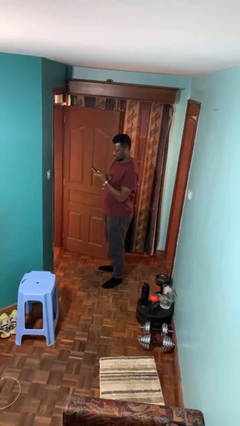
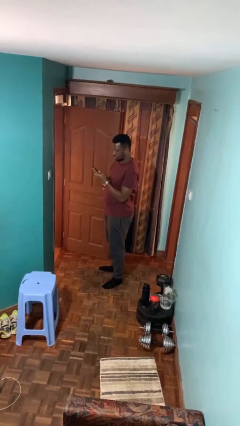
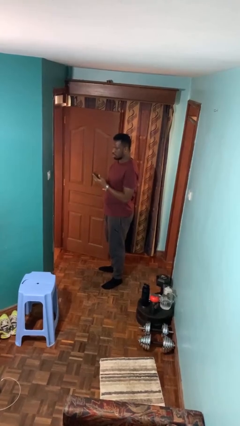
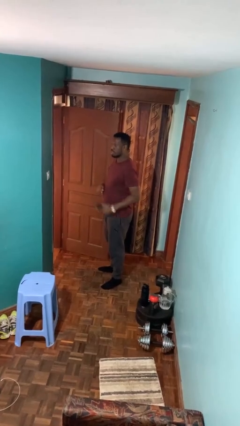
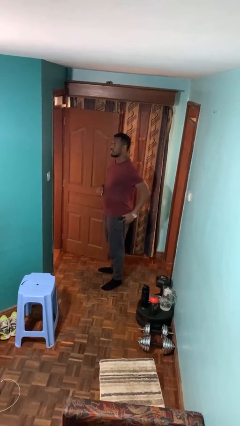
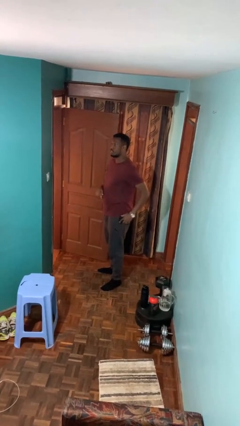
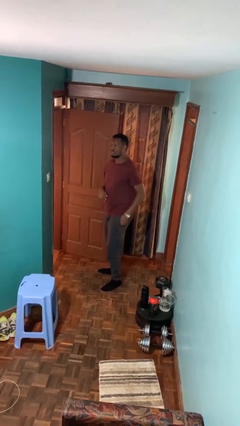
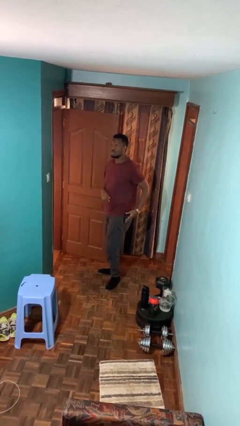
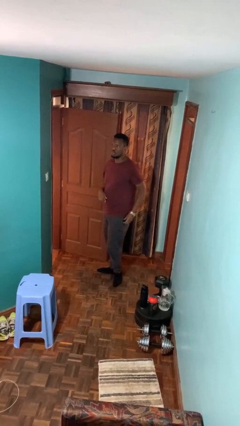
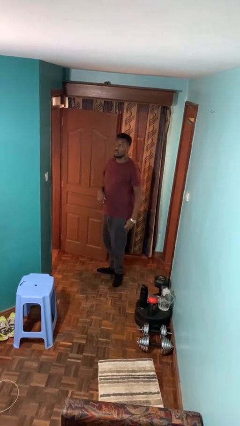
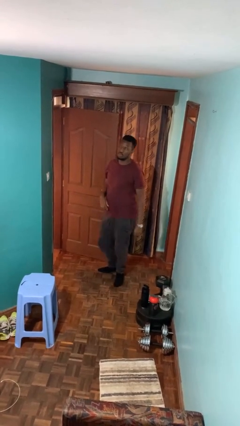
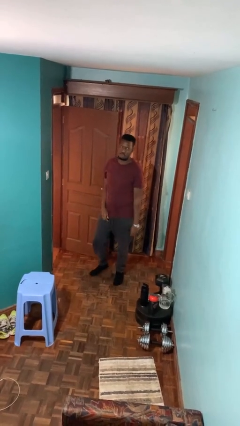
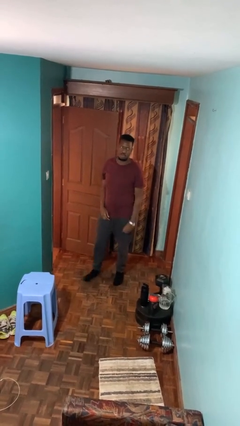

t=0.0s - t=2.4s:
person puts phone into pocket

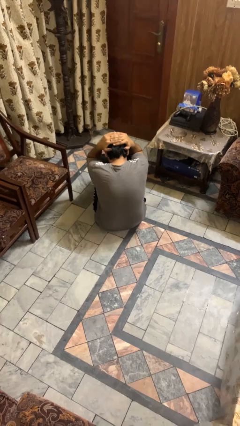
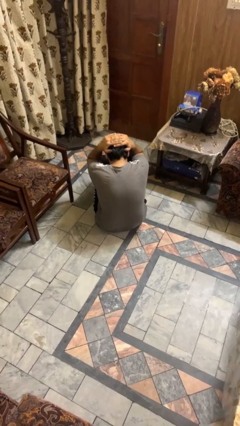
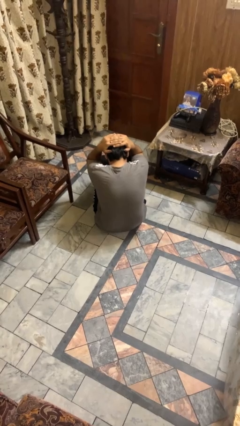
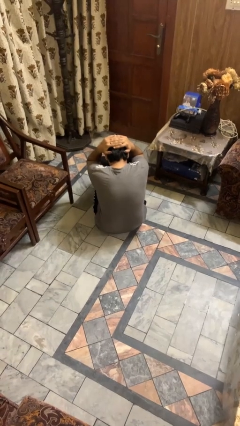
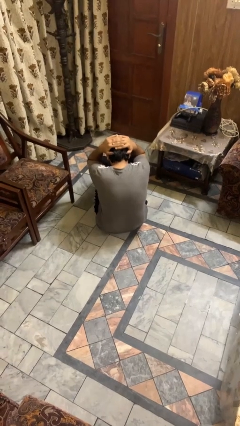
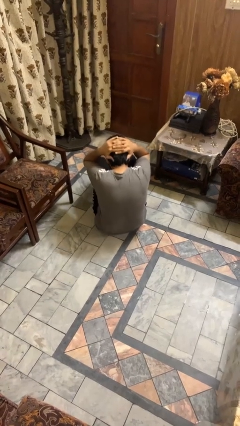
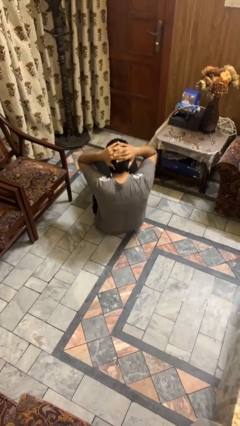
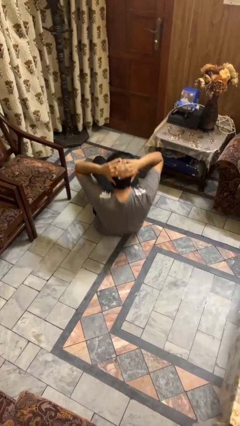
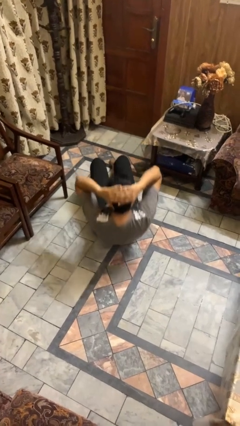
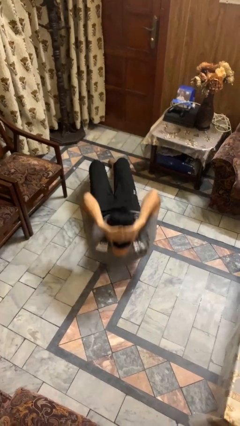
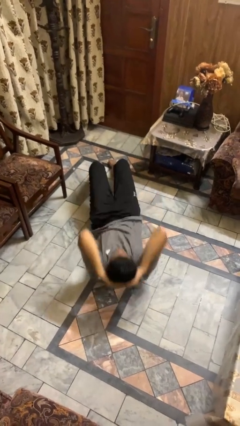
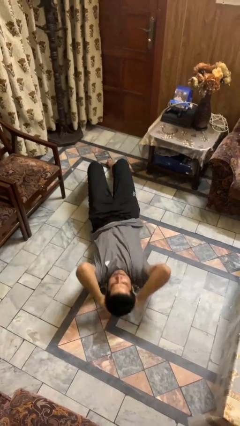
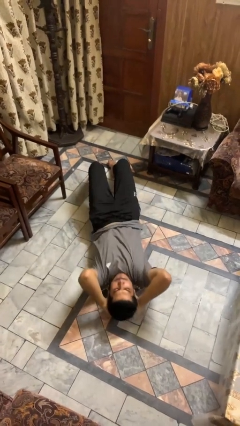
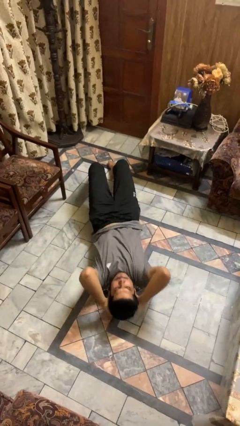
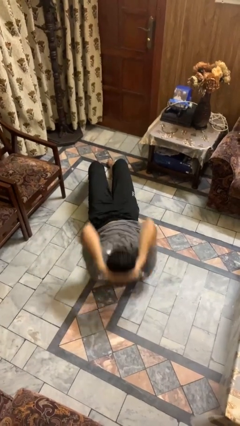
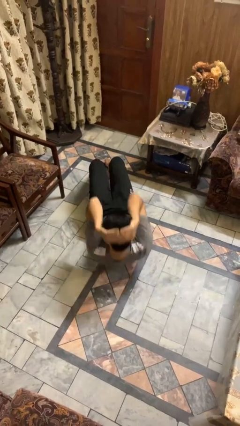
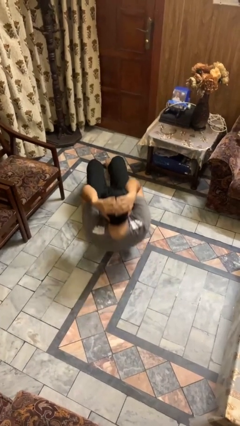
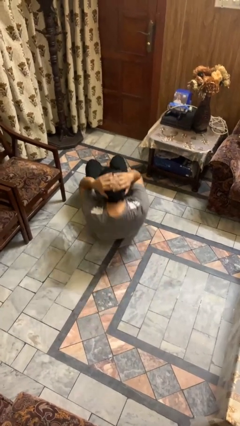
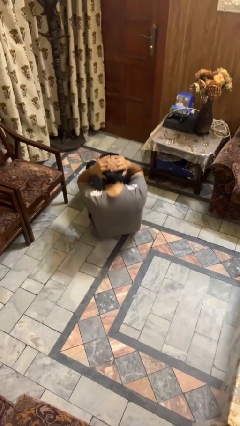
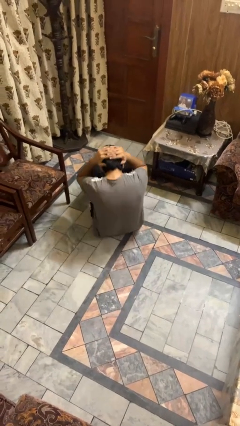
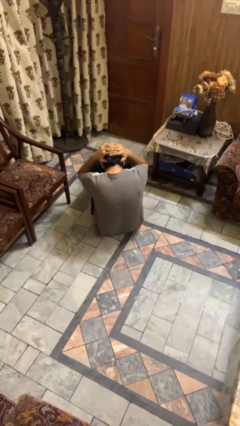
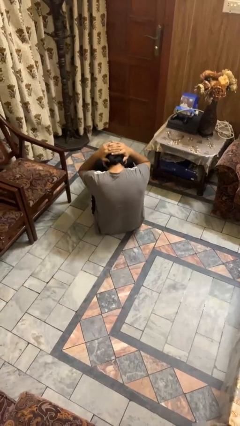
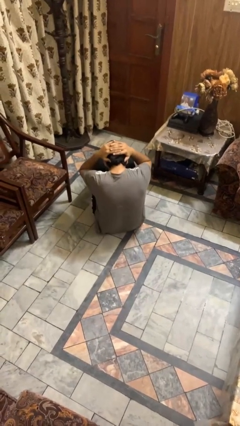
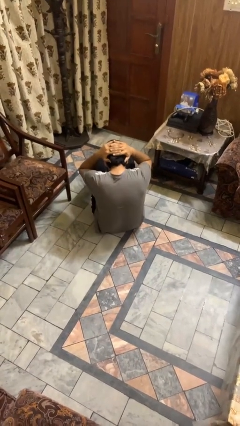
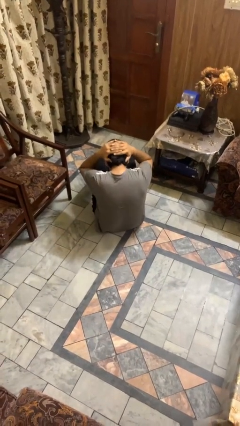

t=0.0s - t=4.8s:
person exercises with situp

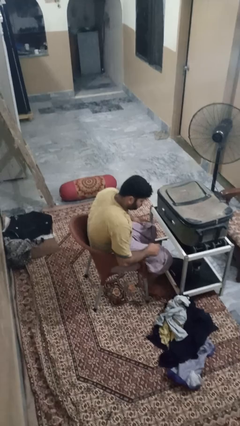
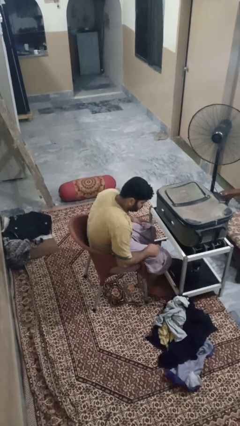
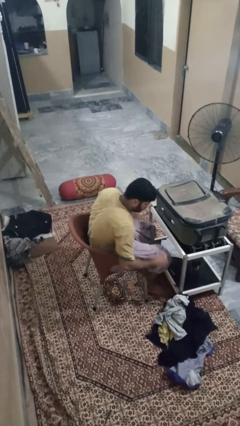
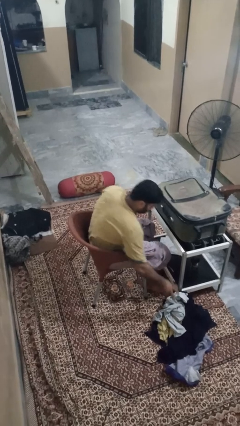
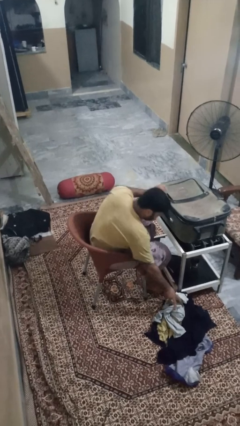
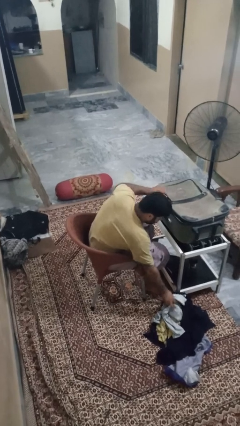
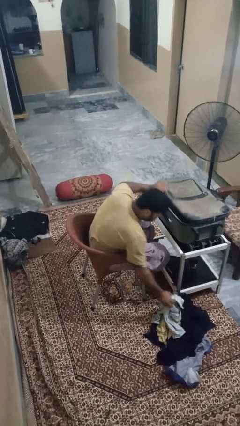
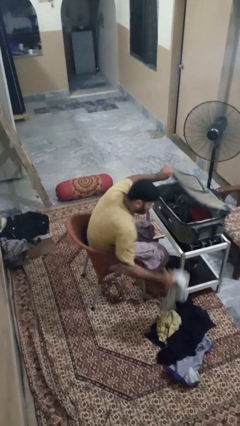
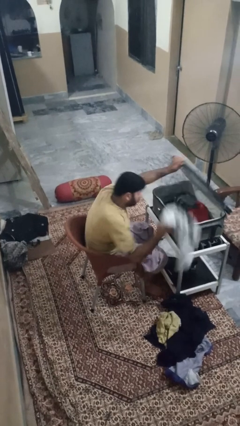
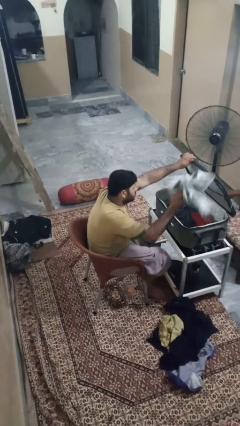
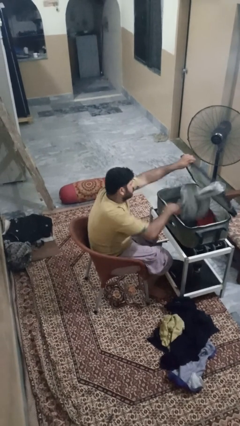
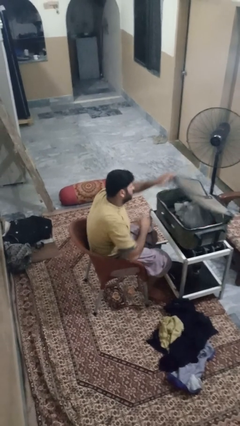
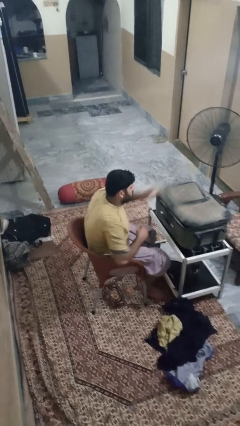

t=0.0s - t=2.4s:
person loads clothes into suitcase

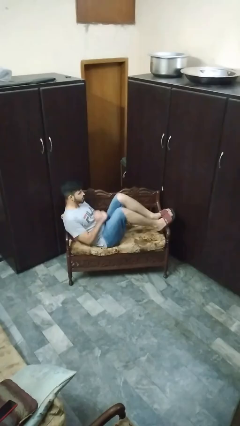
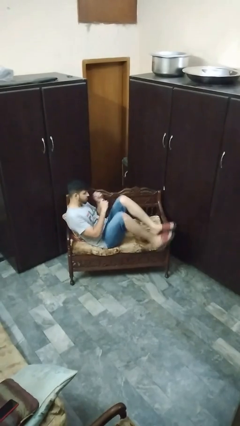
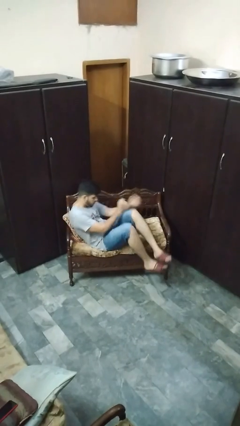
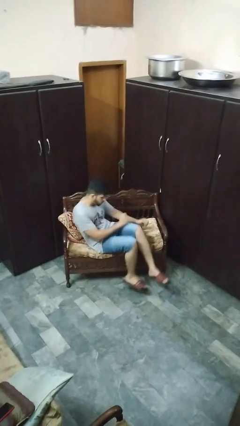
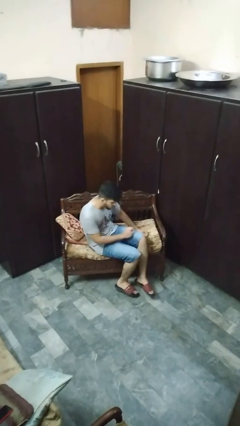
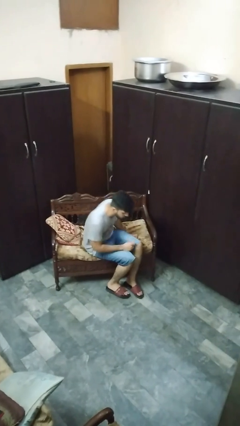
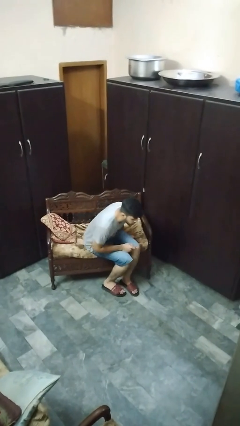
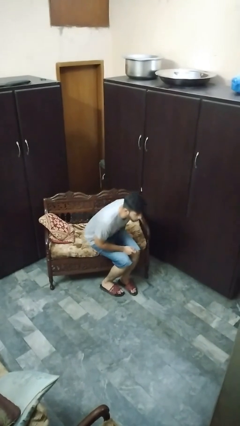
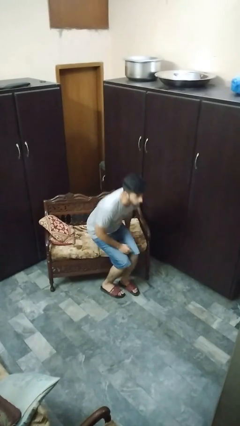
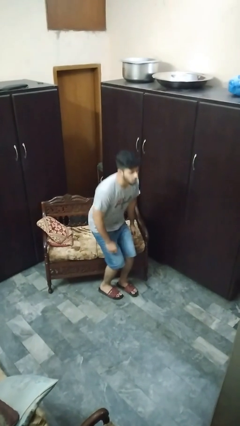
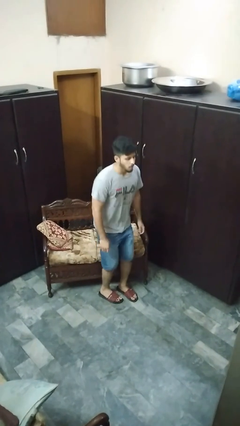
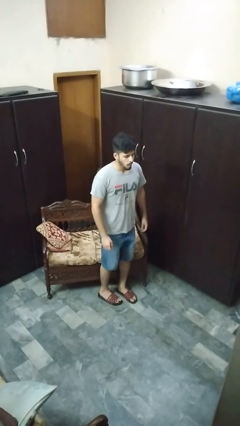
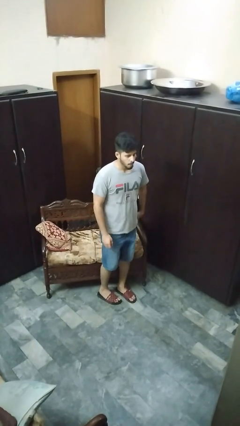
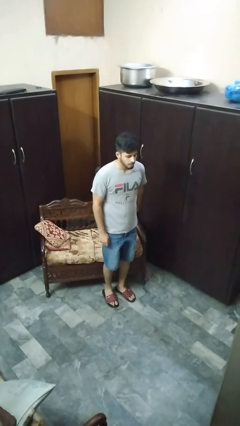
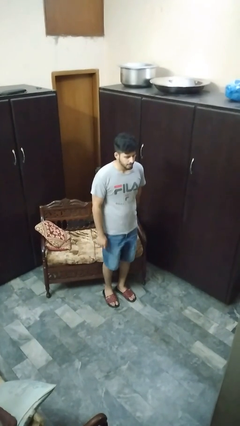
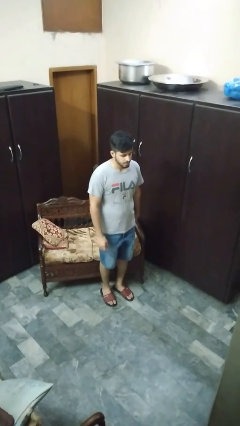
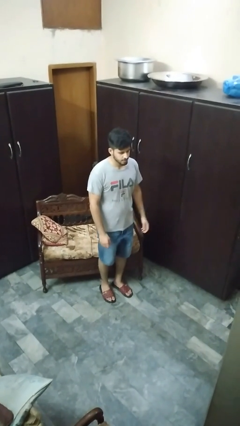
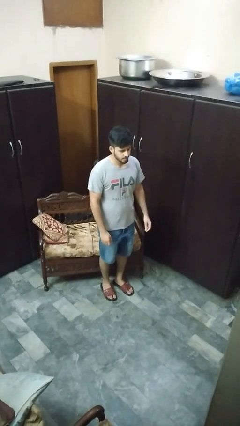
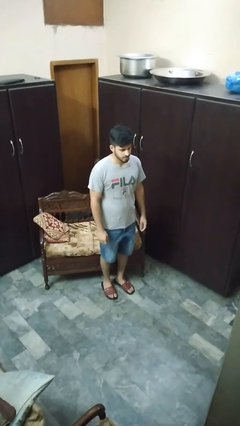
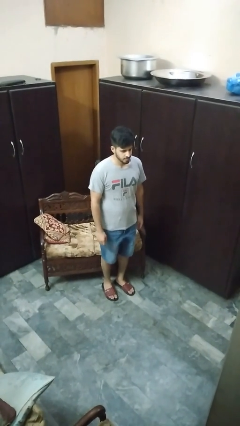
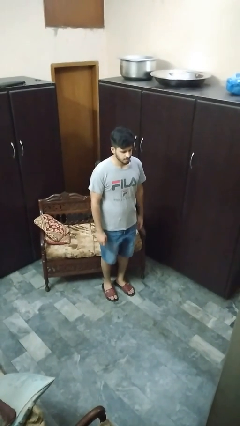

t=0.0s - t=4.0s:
person stands up

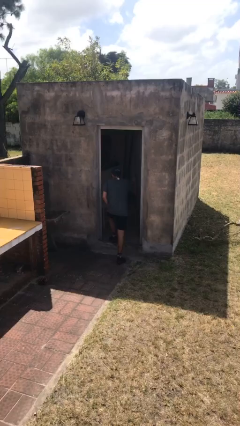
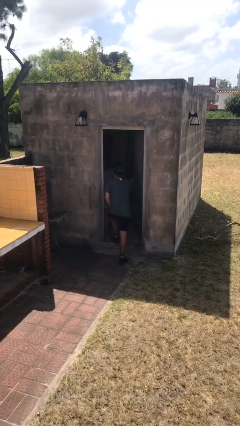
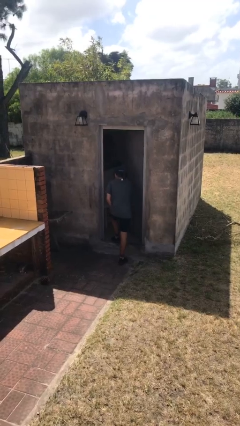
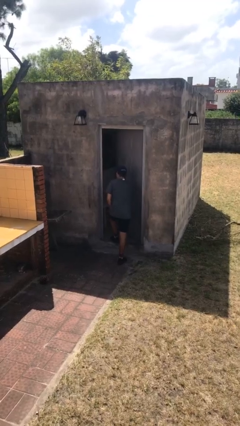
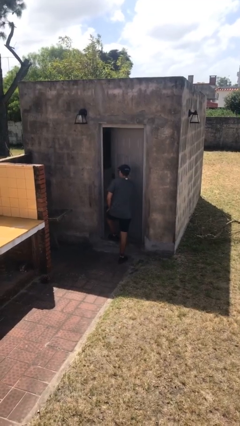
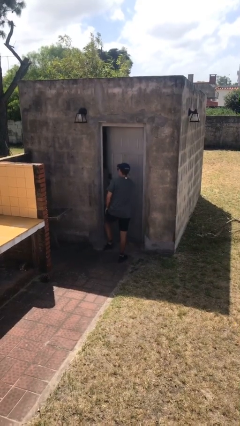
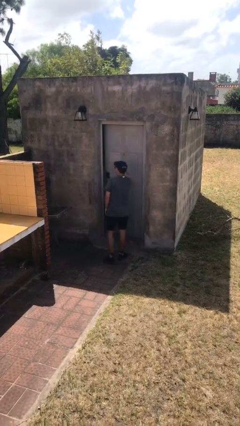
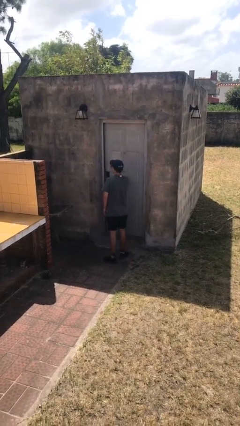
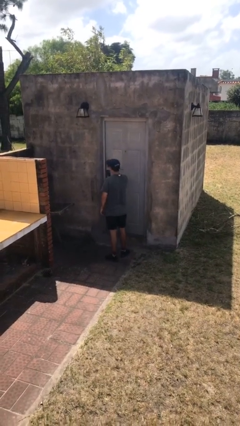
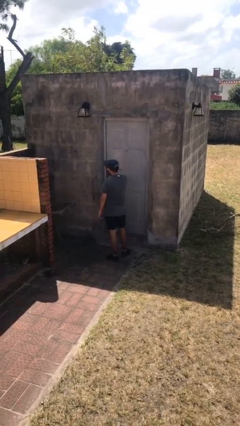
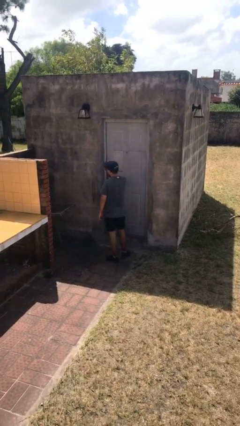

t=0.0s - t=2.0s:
person closes facility door

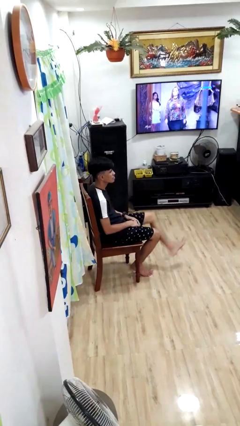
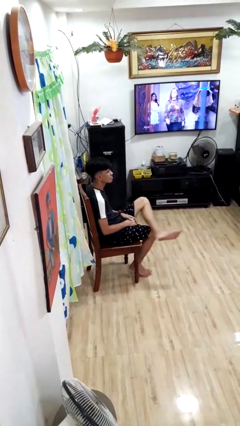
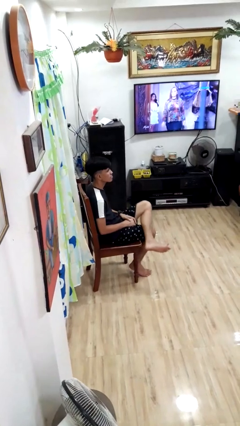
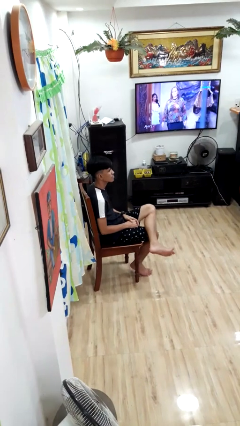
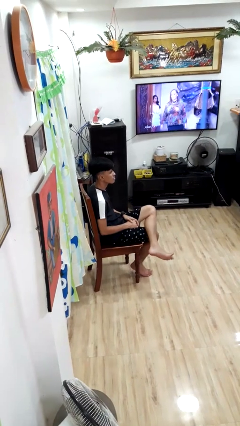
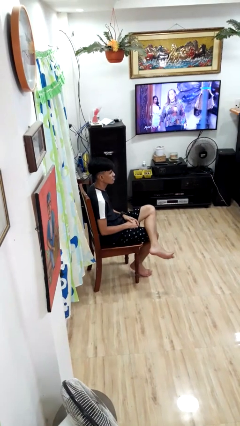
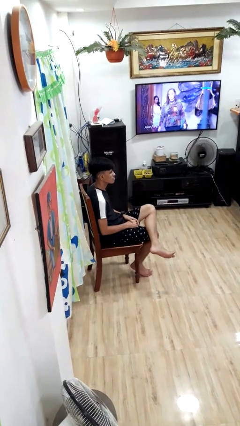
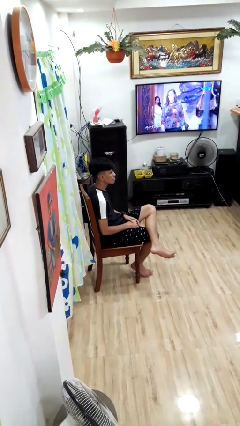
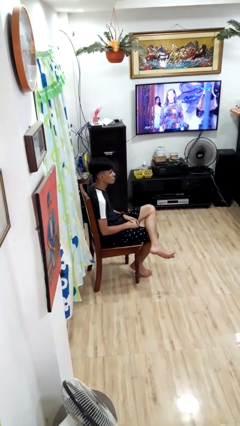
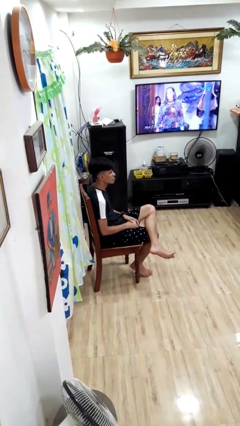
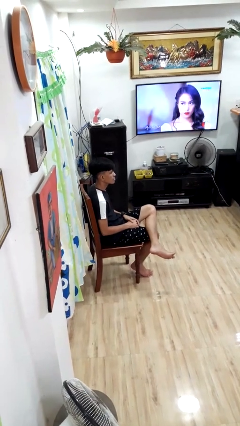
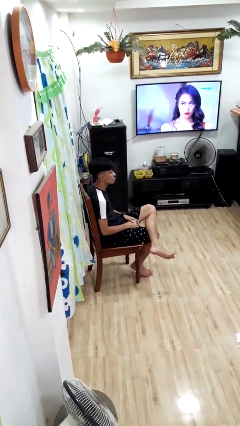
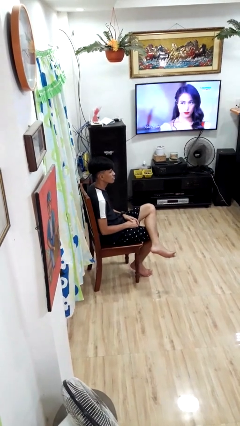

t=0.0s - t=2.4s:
person crosses legs
